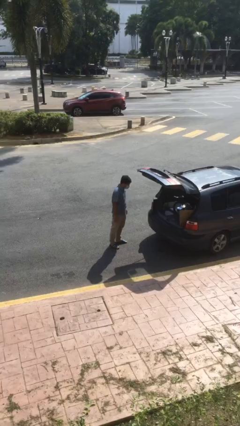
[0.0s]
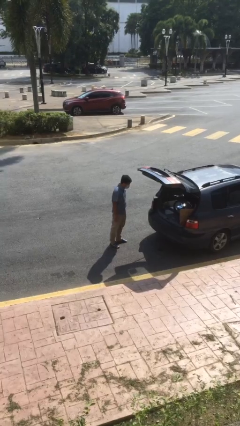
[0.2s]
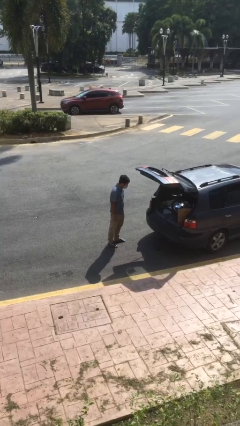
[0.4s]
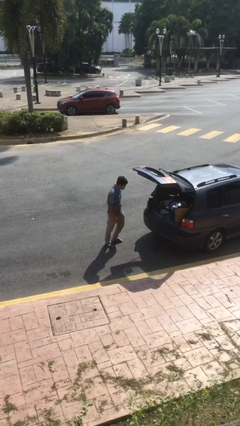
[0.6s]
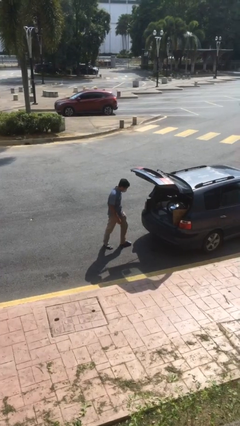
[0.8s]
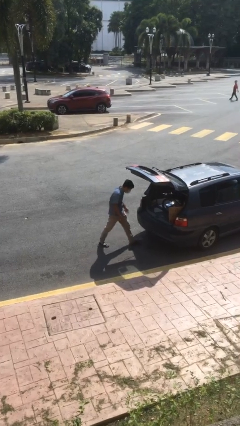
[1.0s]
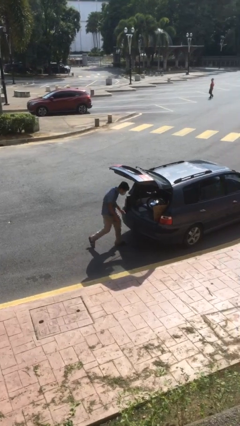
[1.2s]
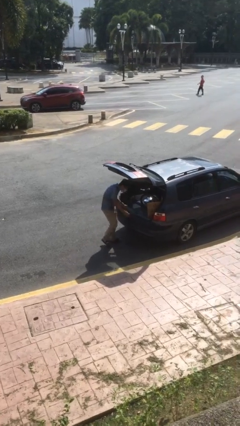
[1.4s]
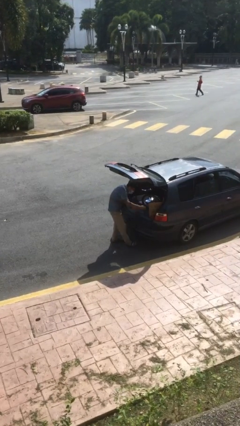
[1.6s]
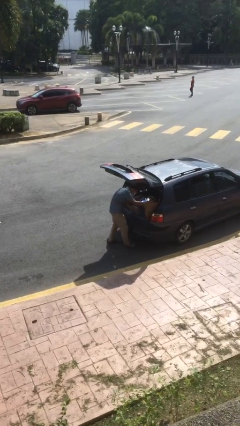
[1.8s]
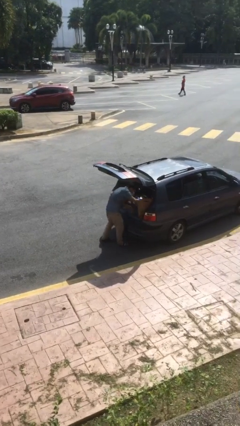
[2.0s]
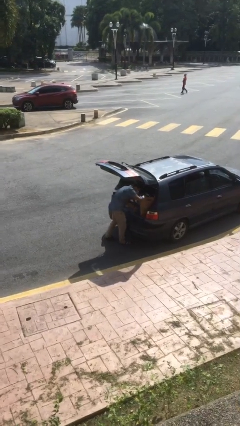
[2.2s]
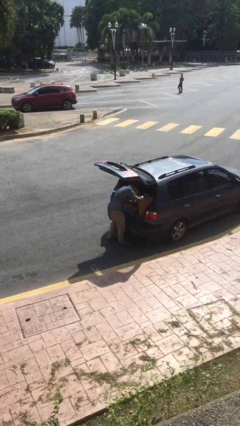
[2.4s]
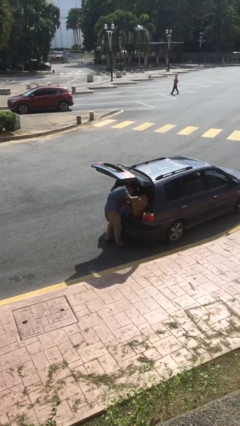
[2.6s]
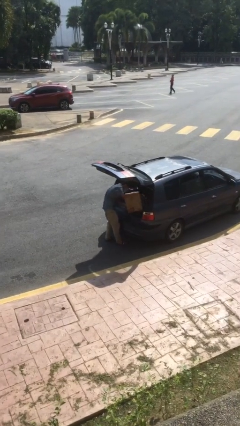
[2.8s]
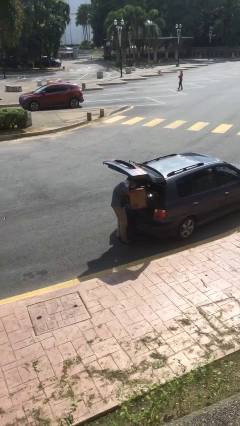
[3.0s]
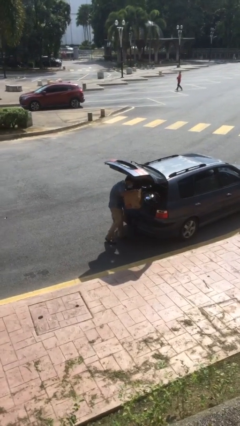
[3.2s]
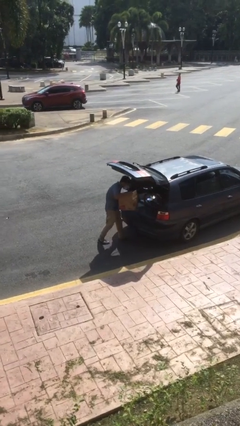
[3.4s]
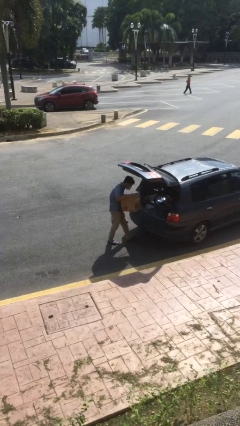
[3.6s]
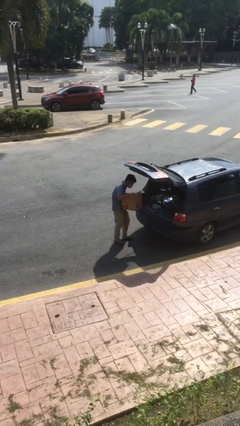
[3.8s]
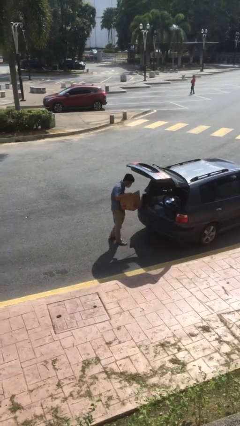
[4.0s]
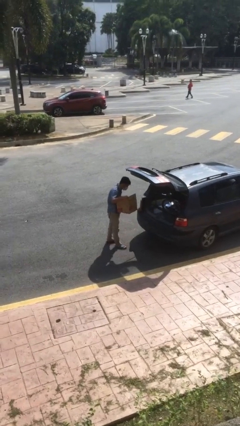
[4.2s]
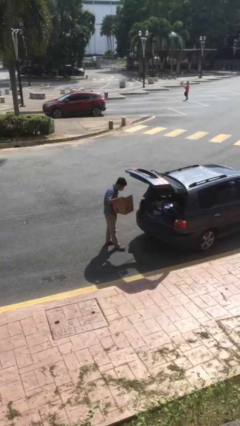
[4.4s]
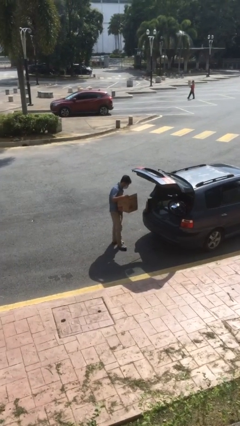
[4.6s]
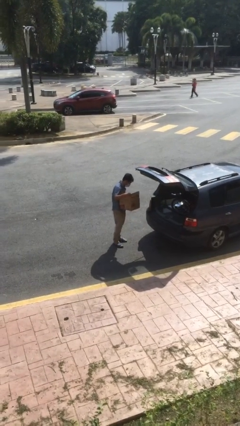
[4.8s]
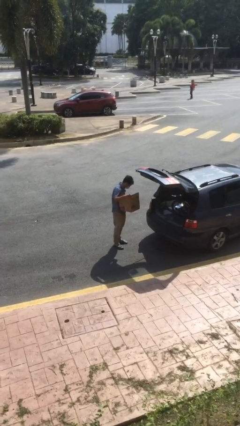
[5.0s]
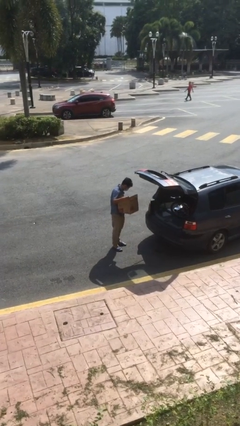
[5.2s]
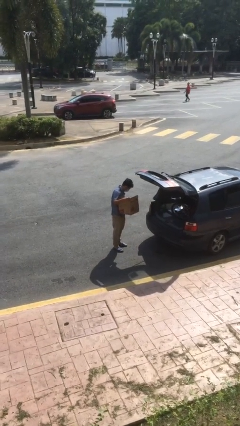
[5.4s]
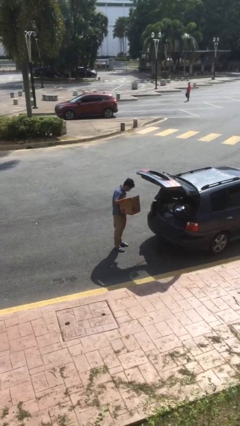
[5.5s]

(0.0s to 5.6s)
person unloads car

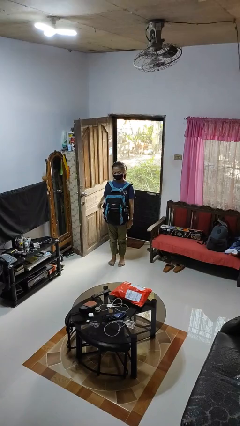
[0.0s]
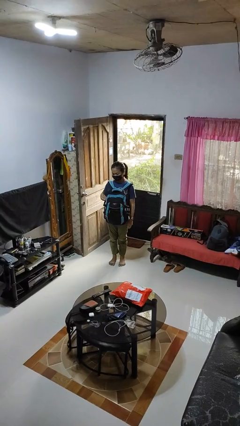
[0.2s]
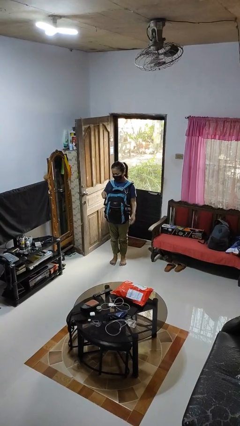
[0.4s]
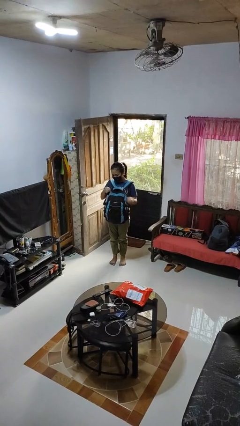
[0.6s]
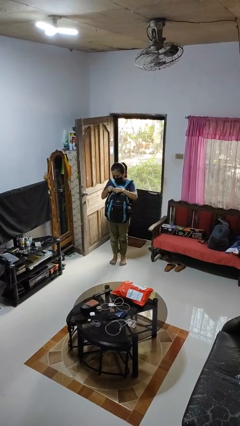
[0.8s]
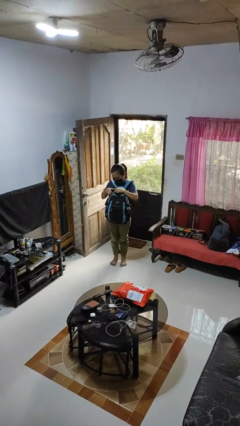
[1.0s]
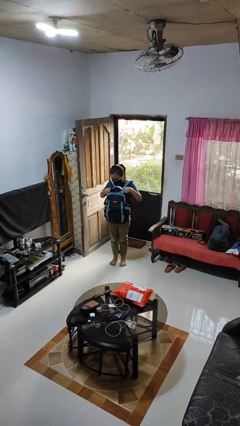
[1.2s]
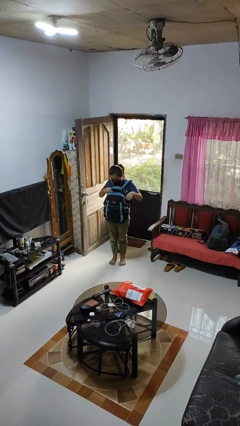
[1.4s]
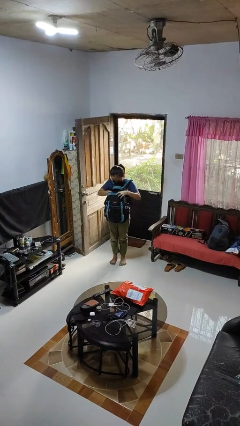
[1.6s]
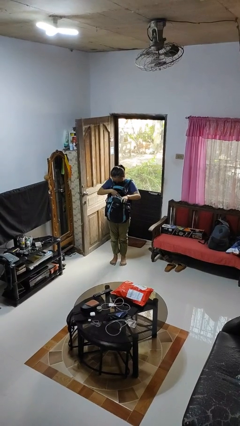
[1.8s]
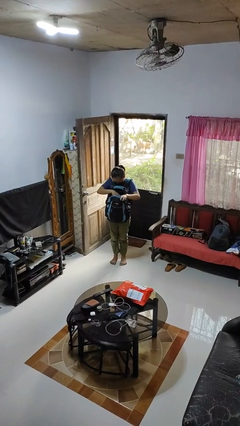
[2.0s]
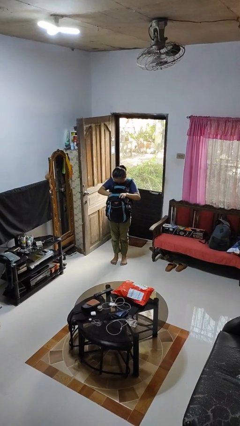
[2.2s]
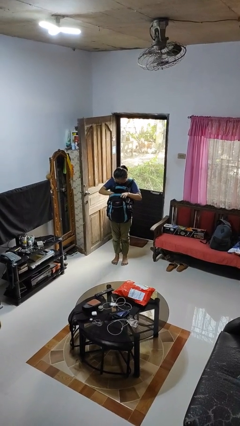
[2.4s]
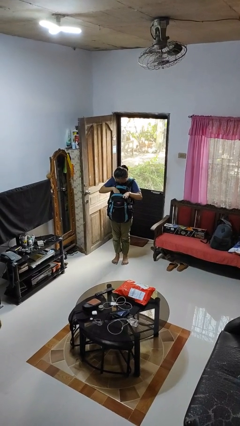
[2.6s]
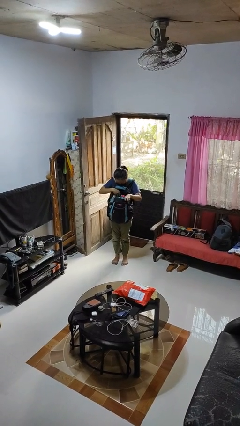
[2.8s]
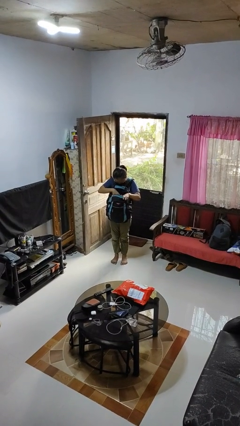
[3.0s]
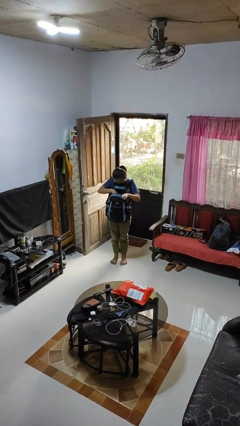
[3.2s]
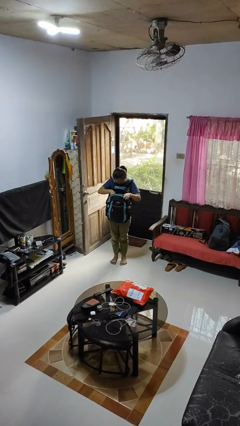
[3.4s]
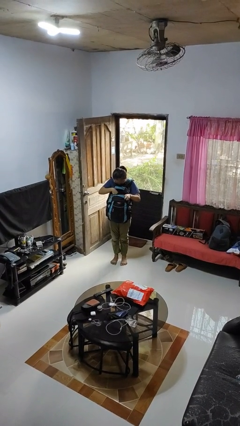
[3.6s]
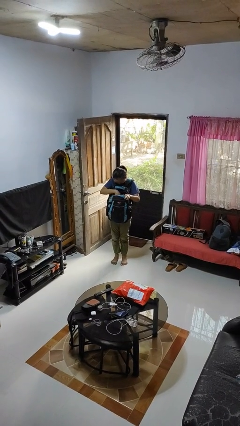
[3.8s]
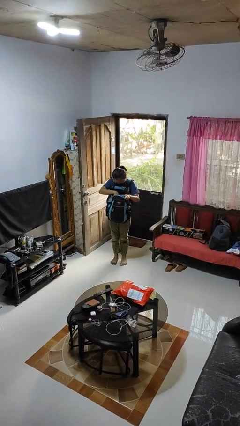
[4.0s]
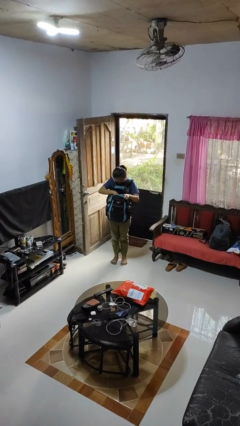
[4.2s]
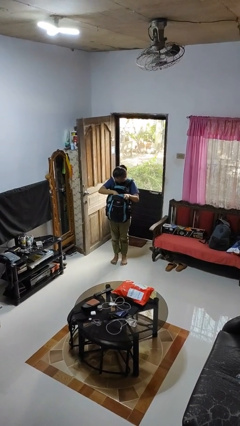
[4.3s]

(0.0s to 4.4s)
person searches in backpack

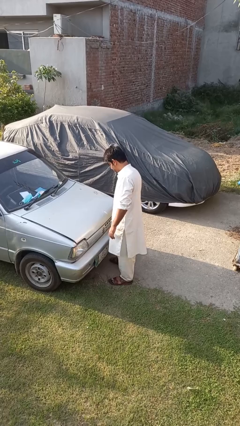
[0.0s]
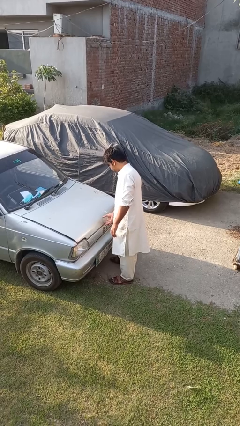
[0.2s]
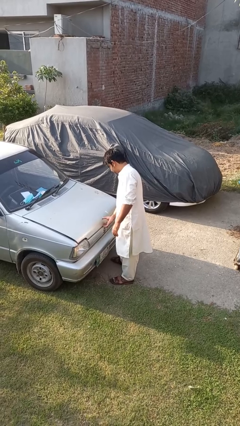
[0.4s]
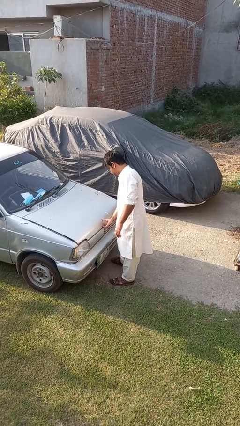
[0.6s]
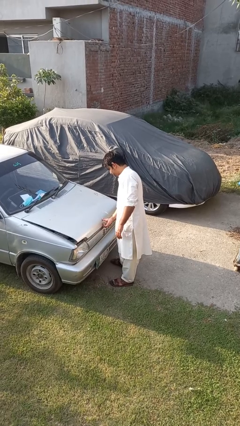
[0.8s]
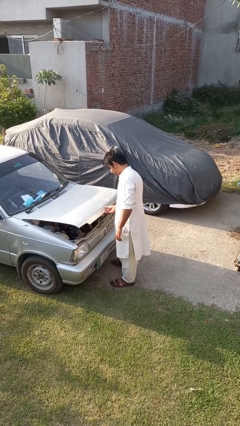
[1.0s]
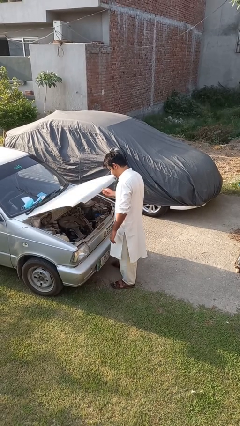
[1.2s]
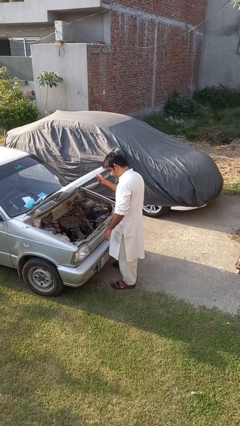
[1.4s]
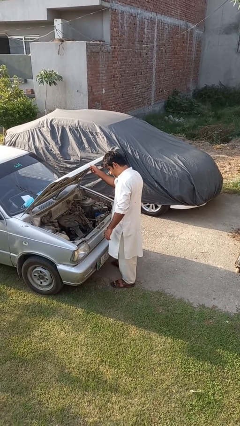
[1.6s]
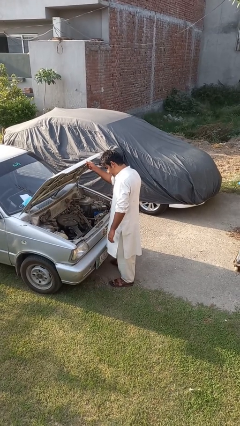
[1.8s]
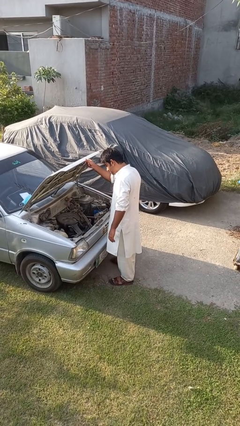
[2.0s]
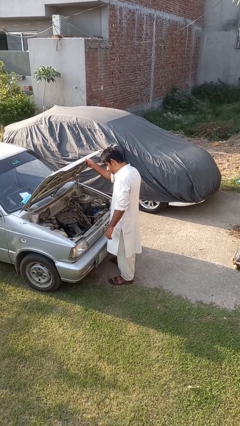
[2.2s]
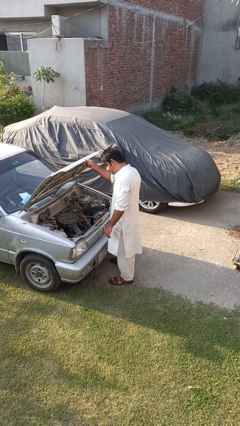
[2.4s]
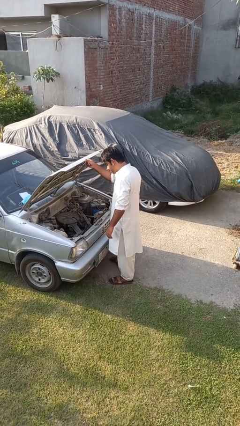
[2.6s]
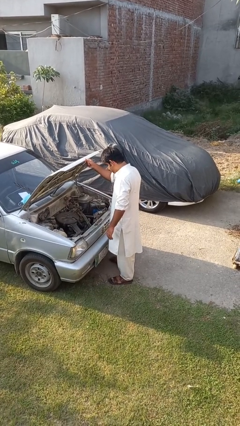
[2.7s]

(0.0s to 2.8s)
person opens car hood

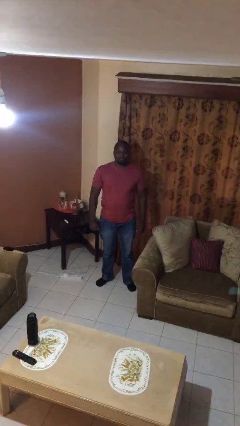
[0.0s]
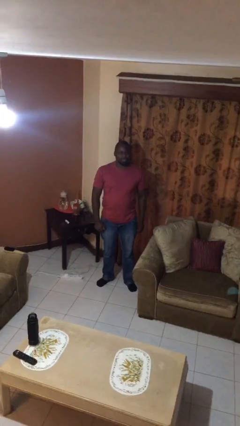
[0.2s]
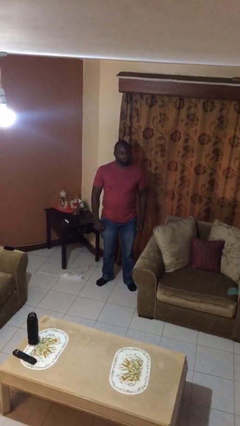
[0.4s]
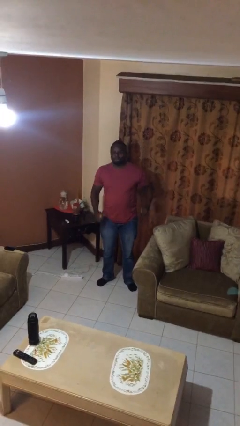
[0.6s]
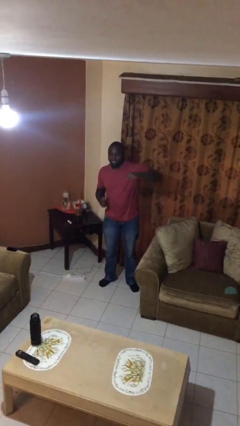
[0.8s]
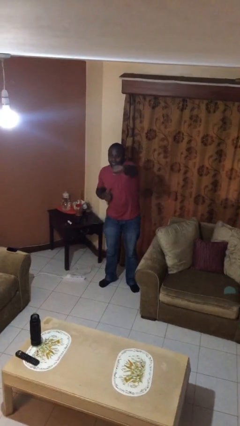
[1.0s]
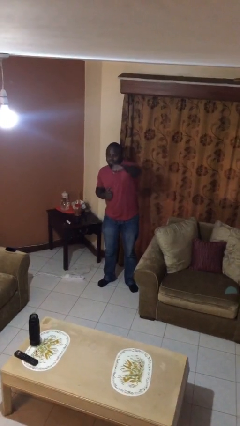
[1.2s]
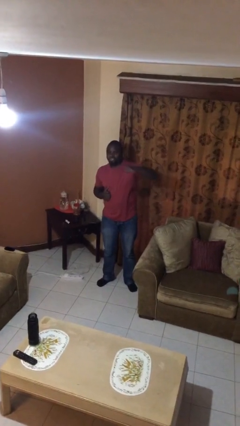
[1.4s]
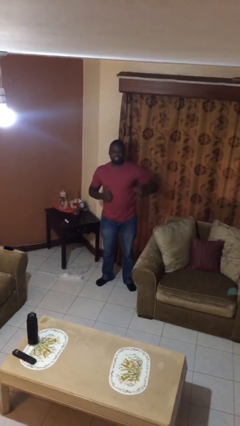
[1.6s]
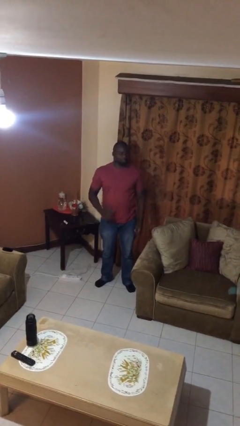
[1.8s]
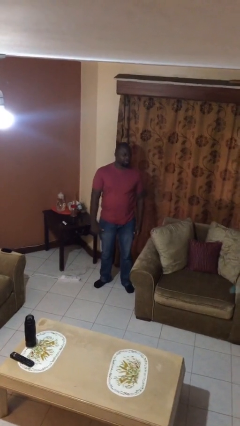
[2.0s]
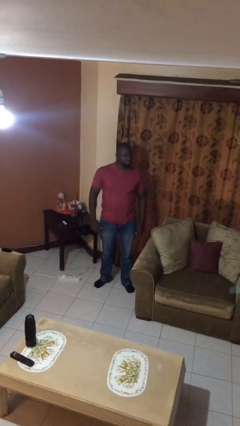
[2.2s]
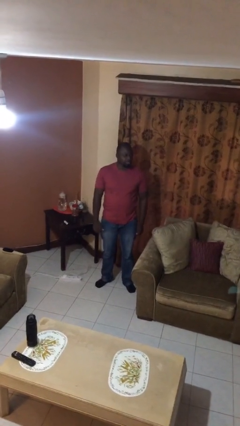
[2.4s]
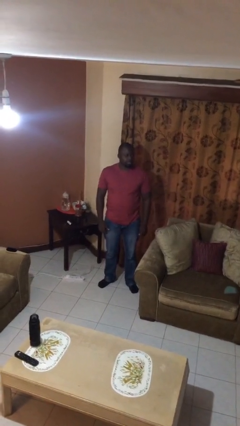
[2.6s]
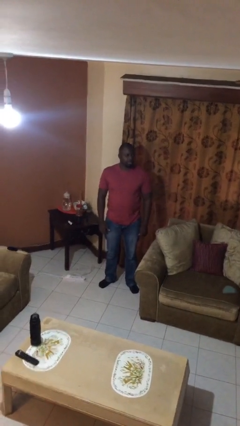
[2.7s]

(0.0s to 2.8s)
person punches

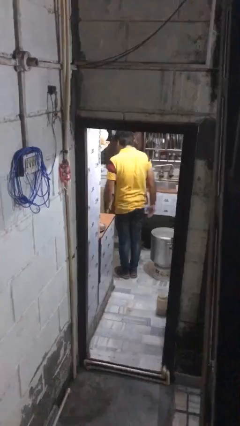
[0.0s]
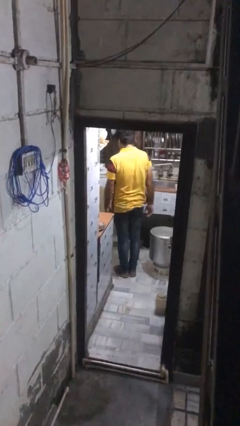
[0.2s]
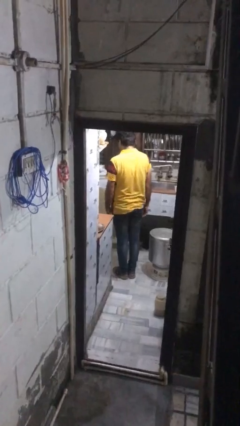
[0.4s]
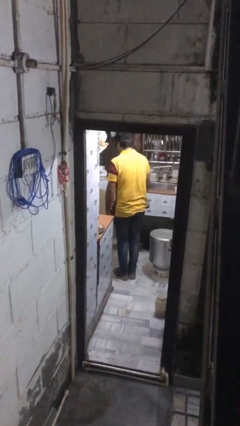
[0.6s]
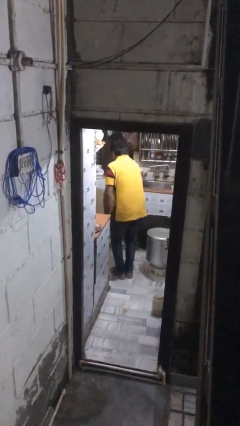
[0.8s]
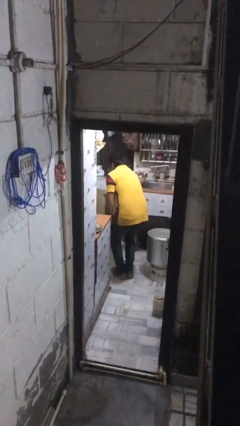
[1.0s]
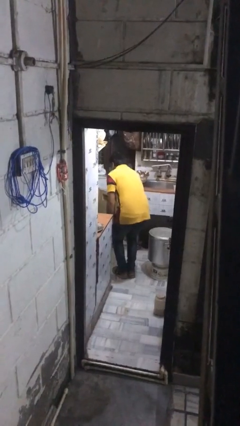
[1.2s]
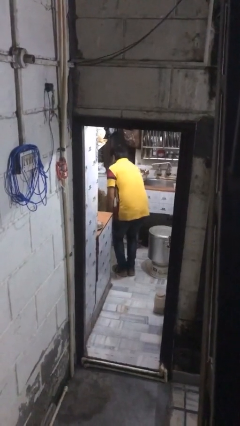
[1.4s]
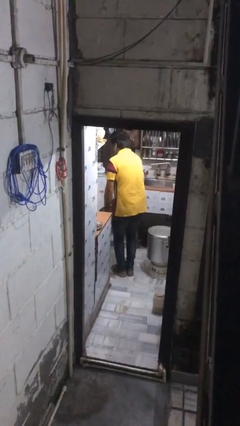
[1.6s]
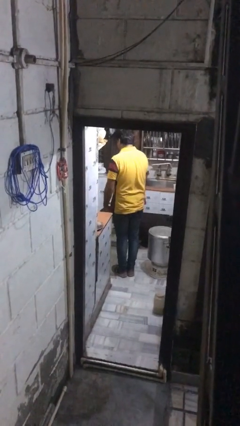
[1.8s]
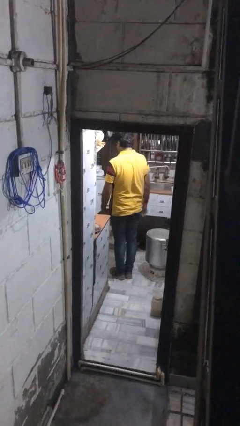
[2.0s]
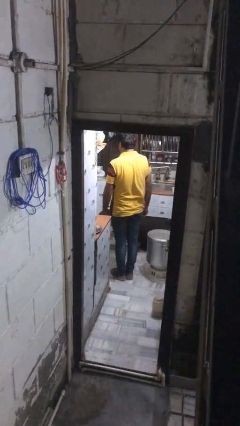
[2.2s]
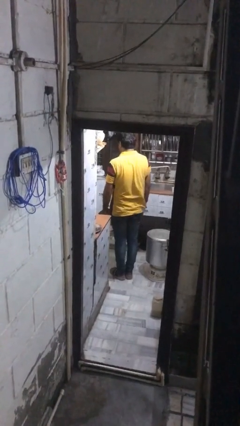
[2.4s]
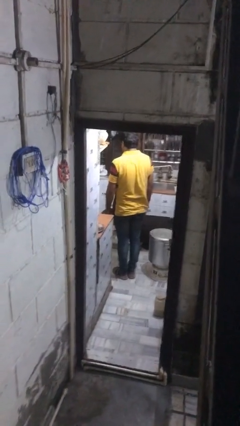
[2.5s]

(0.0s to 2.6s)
person closes kitchen drawer
